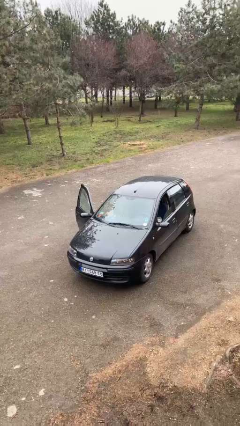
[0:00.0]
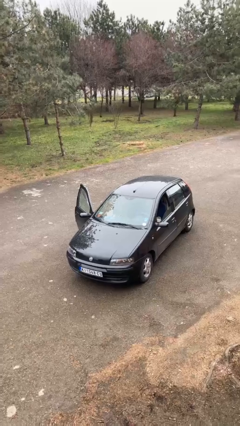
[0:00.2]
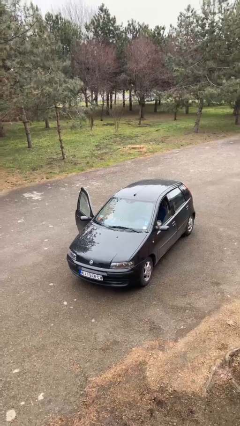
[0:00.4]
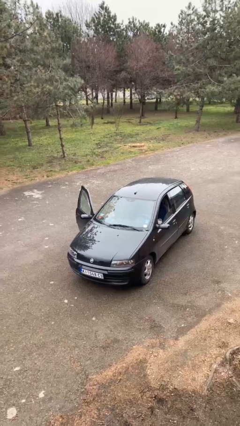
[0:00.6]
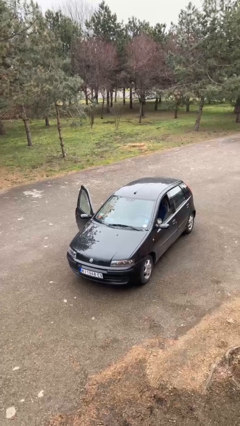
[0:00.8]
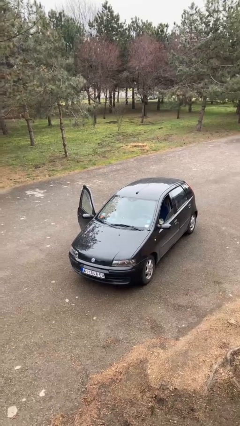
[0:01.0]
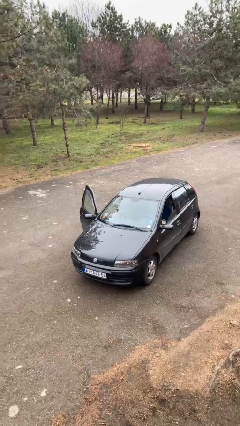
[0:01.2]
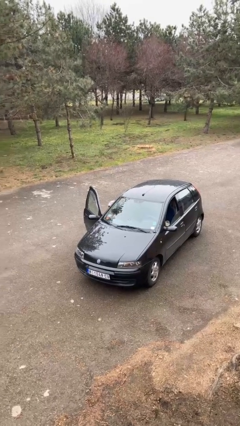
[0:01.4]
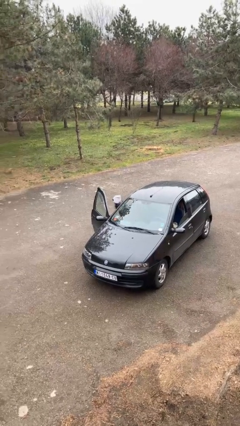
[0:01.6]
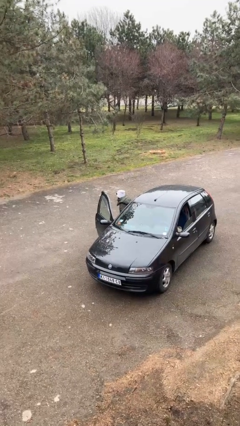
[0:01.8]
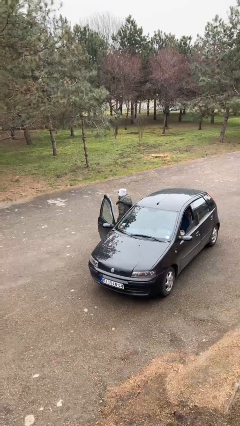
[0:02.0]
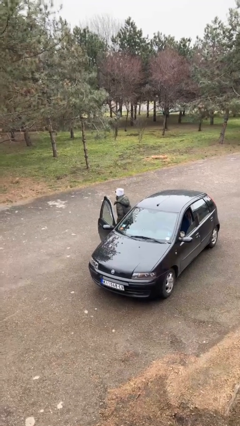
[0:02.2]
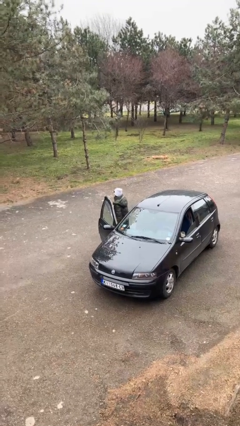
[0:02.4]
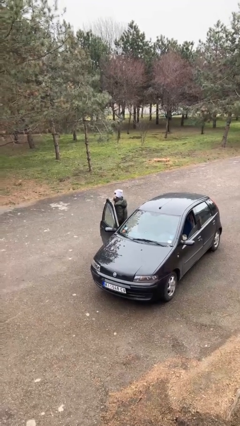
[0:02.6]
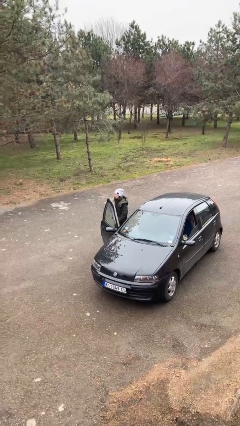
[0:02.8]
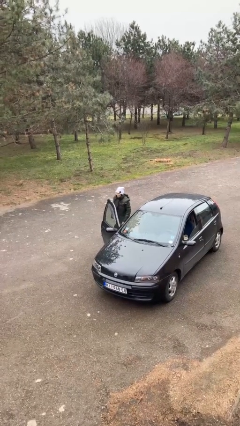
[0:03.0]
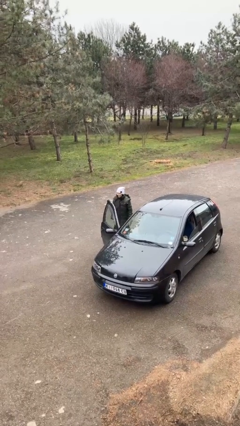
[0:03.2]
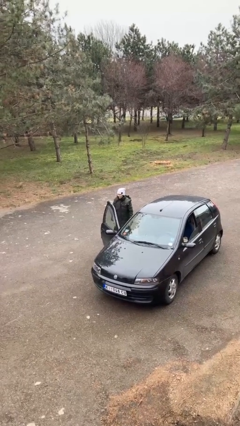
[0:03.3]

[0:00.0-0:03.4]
person exits car

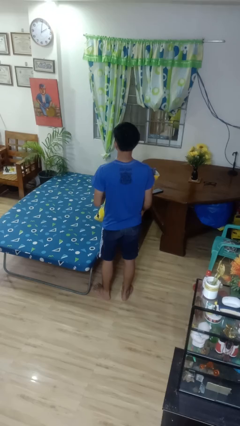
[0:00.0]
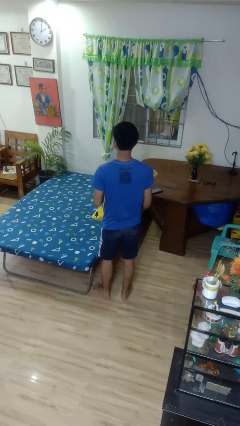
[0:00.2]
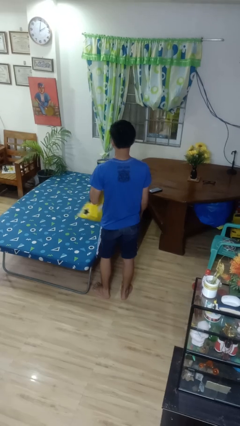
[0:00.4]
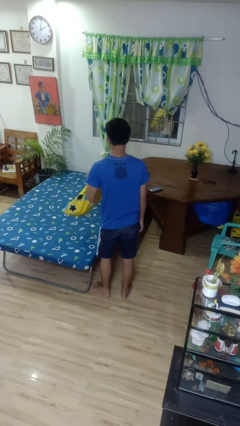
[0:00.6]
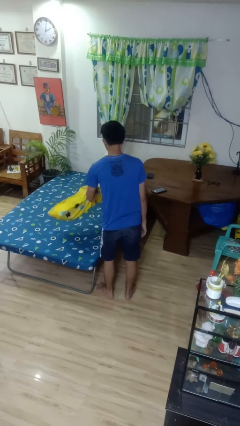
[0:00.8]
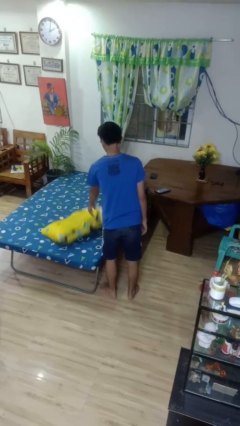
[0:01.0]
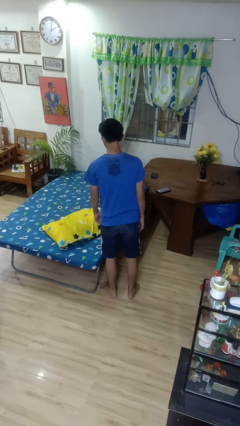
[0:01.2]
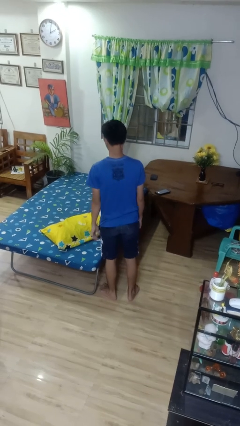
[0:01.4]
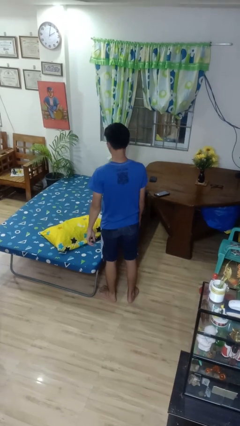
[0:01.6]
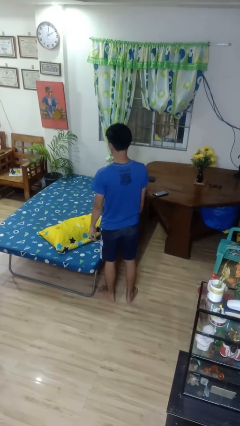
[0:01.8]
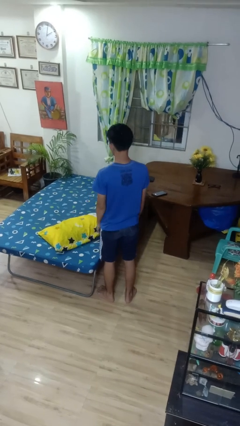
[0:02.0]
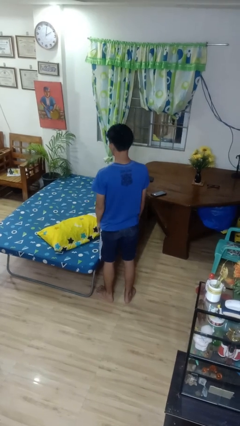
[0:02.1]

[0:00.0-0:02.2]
person puts down object on bed

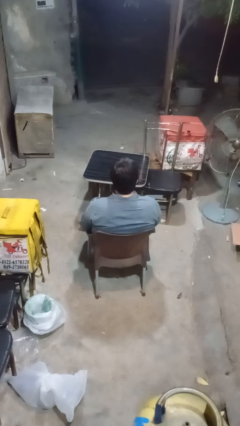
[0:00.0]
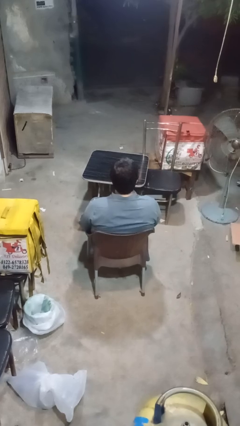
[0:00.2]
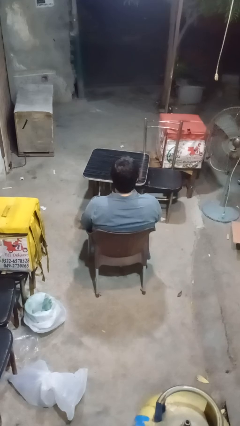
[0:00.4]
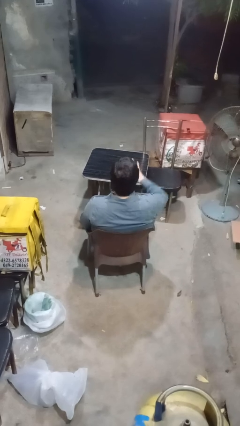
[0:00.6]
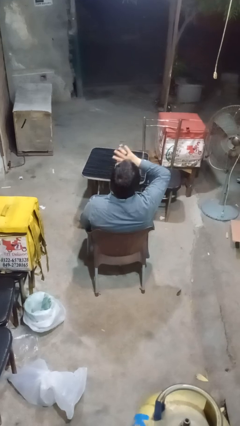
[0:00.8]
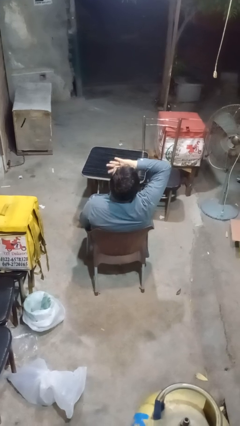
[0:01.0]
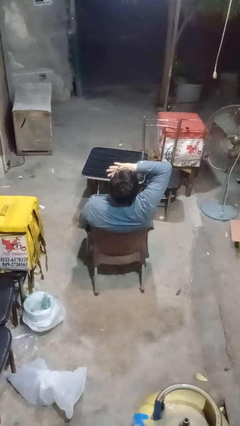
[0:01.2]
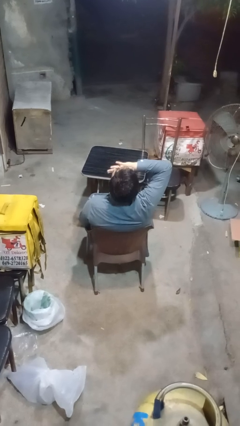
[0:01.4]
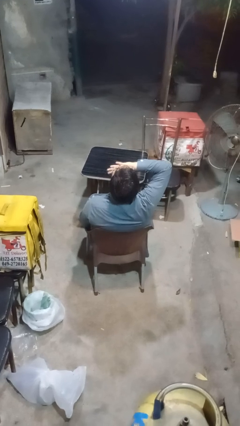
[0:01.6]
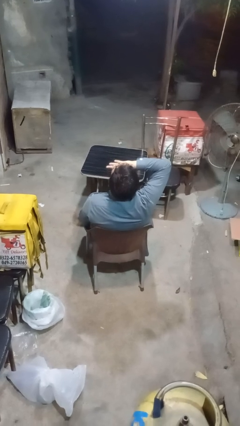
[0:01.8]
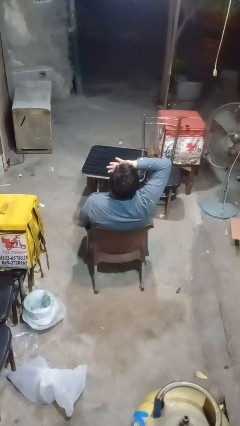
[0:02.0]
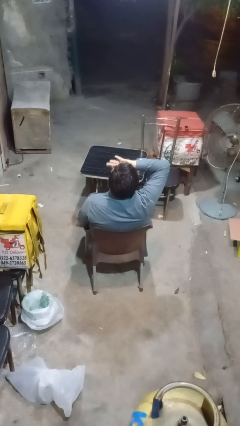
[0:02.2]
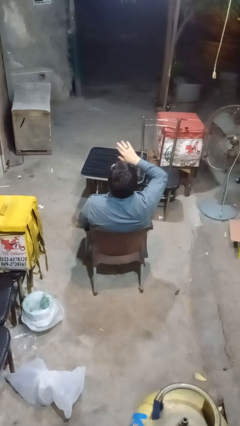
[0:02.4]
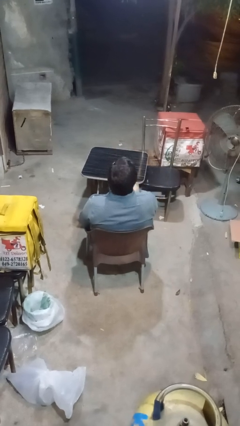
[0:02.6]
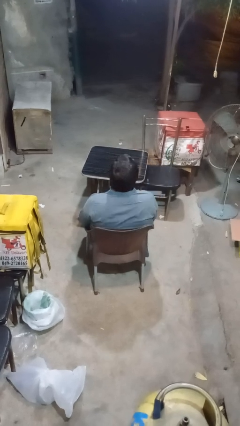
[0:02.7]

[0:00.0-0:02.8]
person yawns

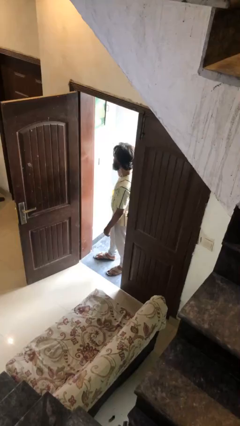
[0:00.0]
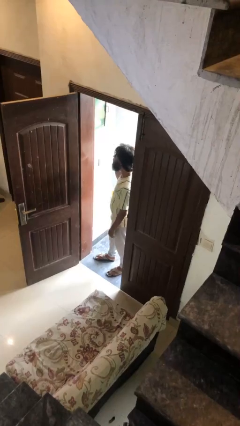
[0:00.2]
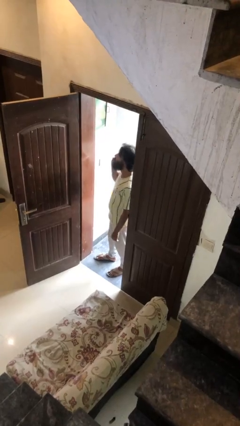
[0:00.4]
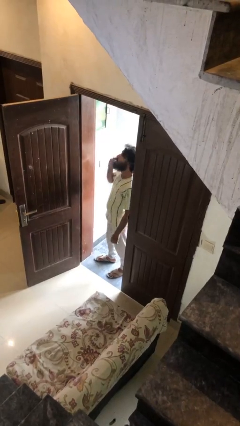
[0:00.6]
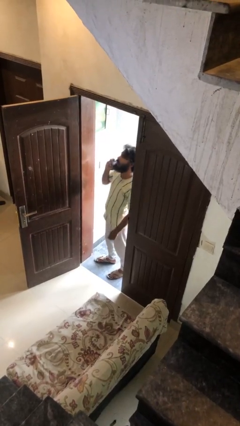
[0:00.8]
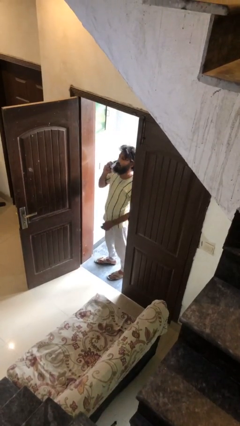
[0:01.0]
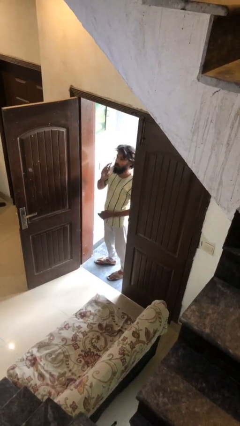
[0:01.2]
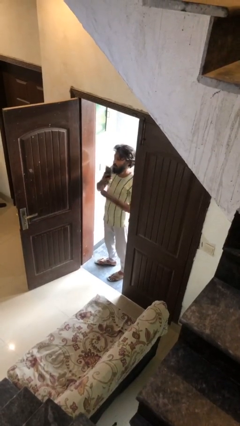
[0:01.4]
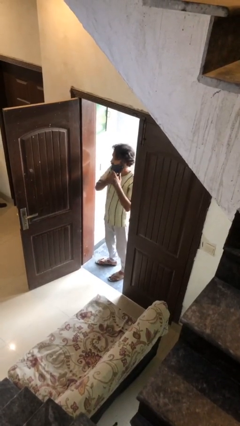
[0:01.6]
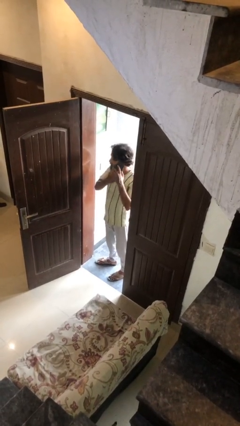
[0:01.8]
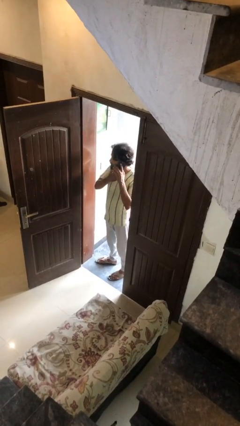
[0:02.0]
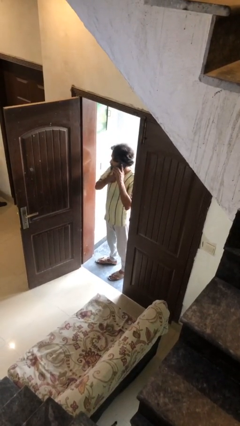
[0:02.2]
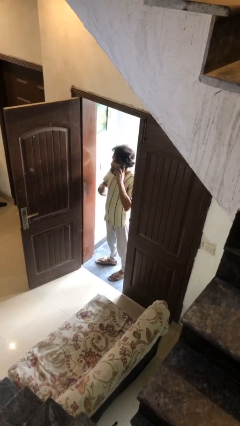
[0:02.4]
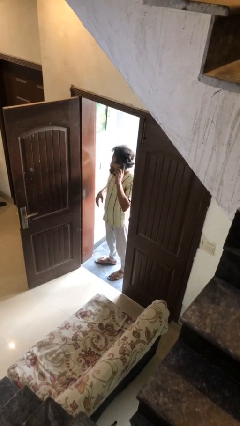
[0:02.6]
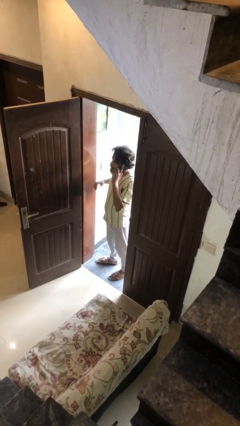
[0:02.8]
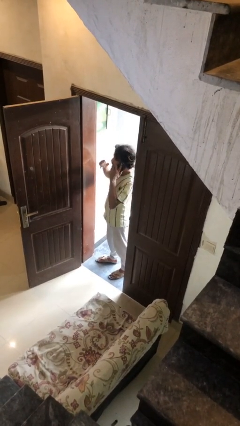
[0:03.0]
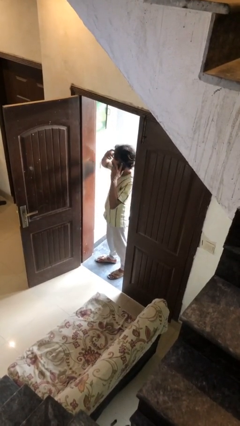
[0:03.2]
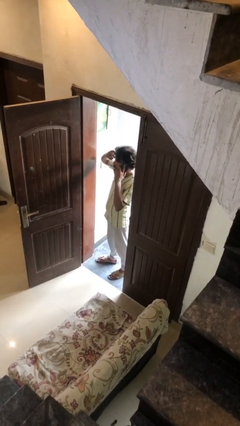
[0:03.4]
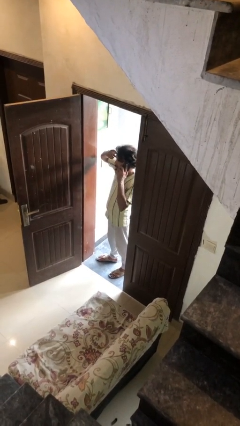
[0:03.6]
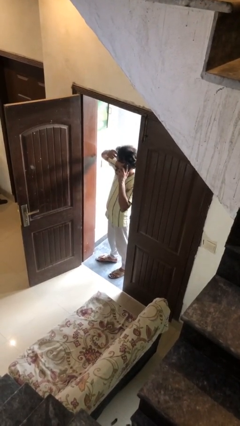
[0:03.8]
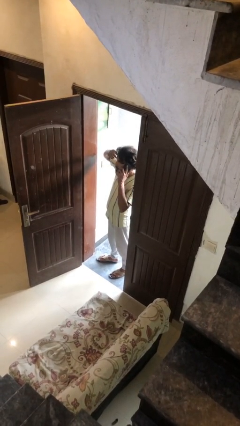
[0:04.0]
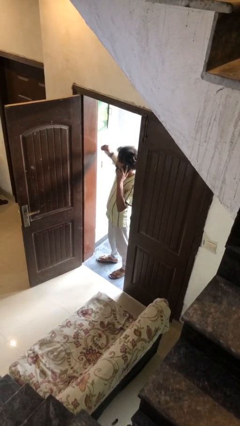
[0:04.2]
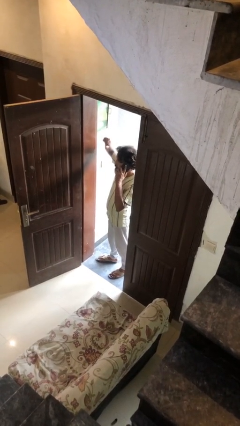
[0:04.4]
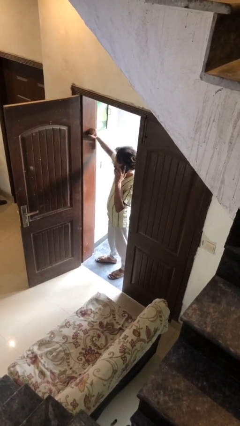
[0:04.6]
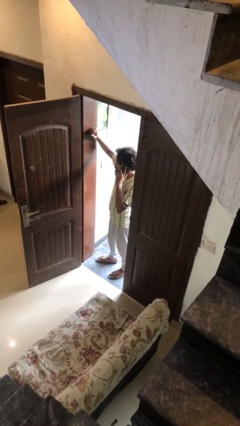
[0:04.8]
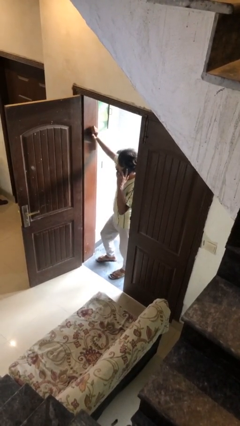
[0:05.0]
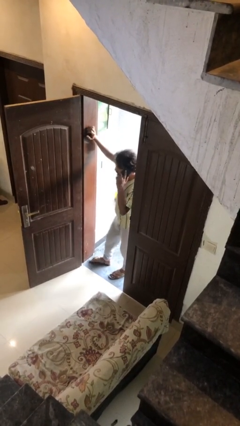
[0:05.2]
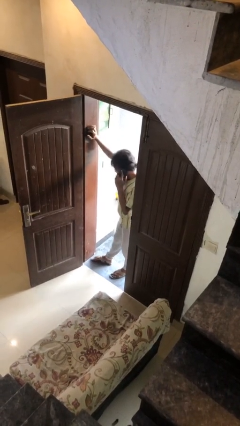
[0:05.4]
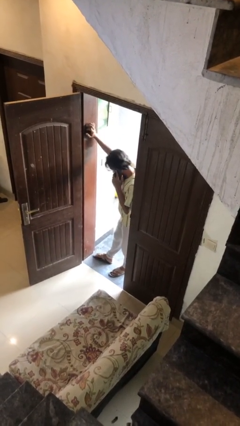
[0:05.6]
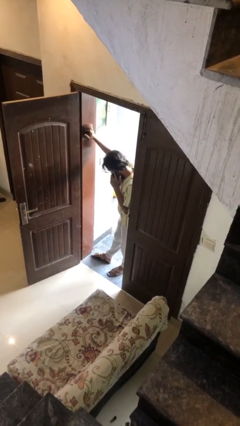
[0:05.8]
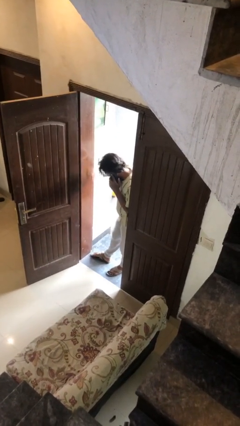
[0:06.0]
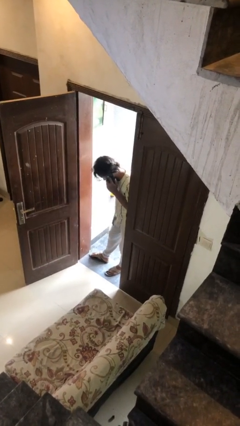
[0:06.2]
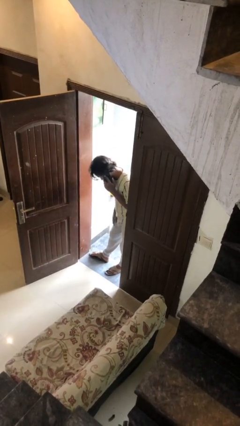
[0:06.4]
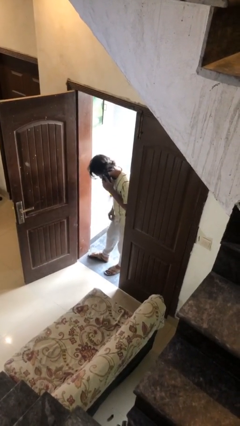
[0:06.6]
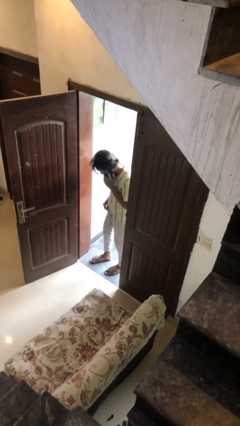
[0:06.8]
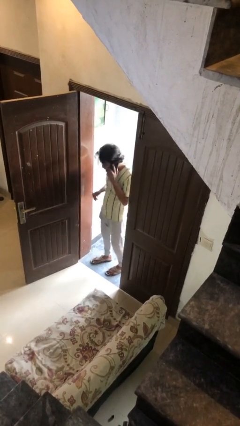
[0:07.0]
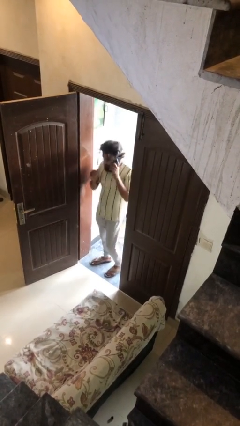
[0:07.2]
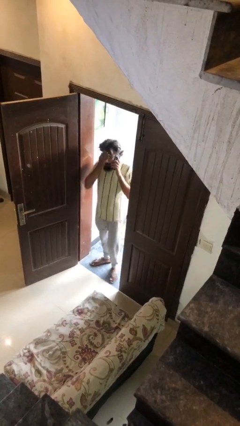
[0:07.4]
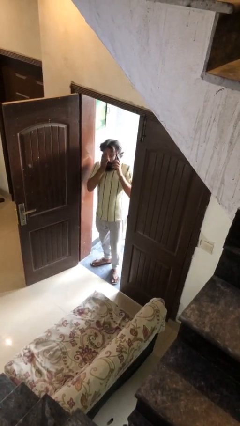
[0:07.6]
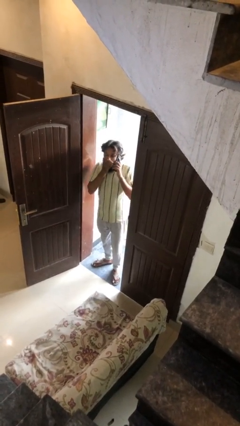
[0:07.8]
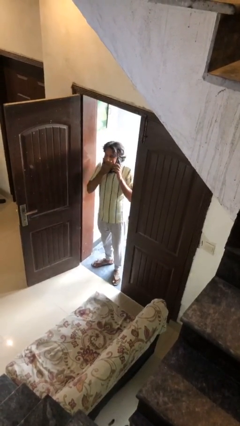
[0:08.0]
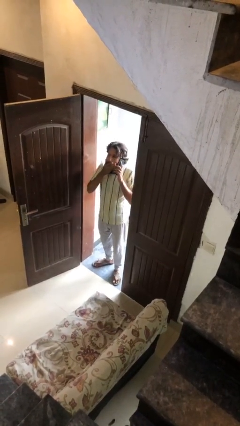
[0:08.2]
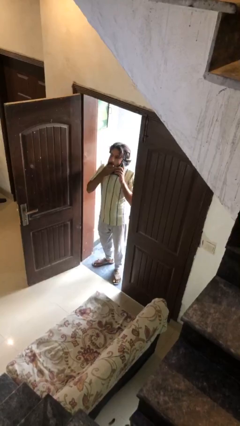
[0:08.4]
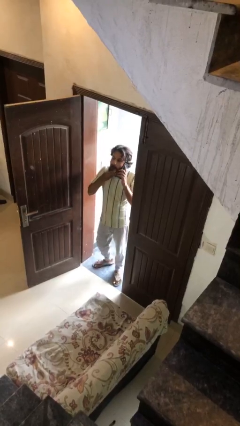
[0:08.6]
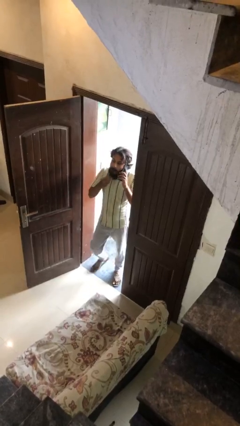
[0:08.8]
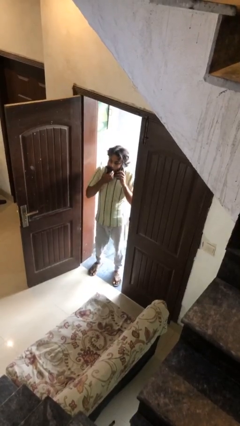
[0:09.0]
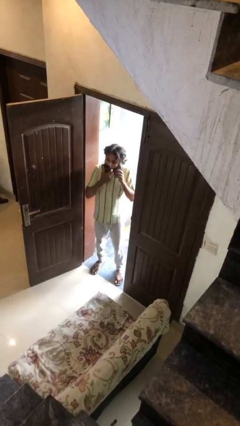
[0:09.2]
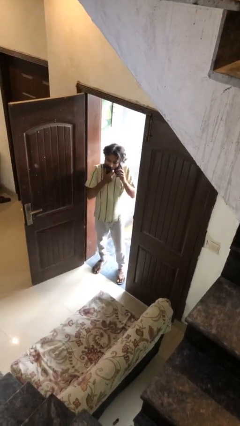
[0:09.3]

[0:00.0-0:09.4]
person talks on phone

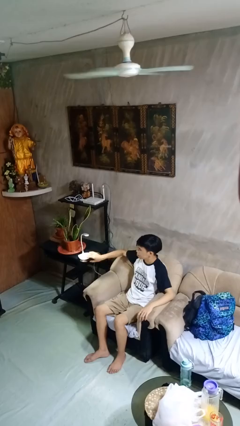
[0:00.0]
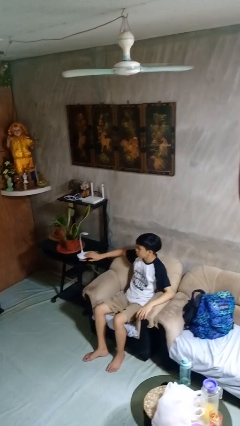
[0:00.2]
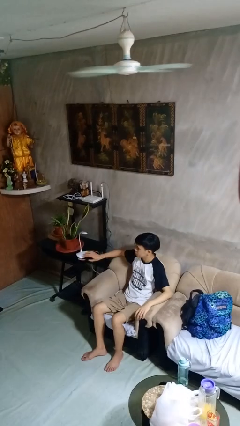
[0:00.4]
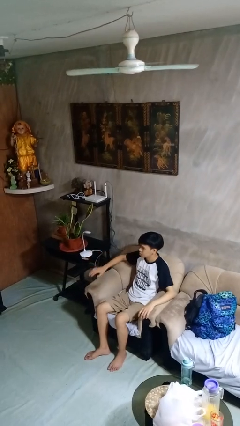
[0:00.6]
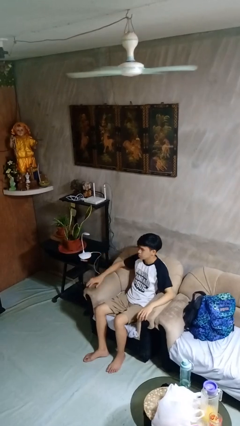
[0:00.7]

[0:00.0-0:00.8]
person turns off lamp
